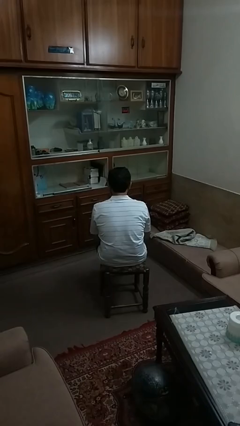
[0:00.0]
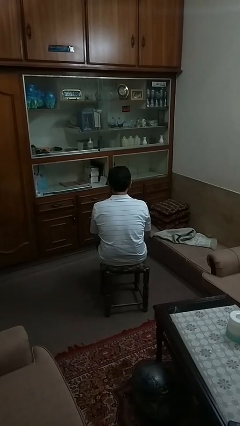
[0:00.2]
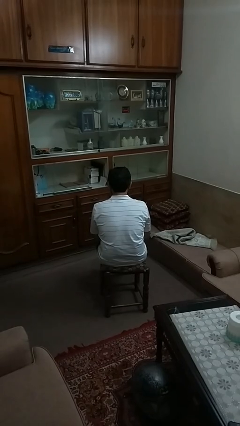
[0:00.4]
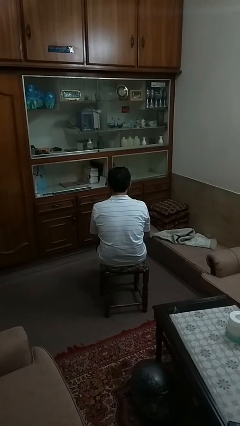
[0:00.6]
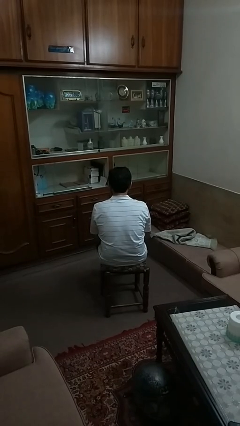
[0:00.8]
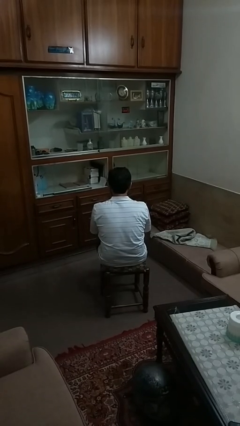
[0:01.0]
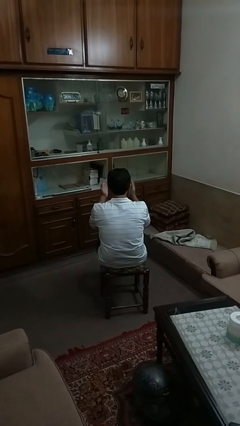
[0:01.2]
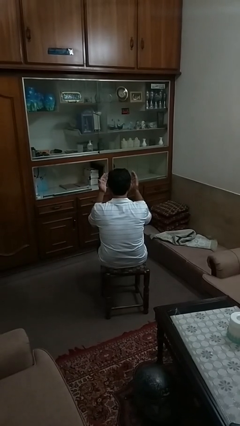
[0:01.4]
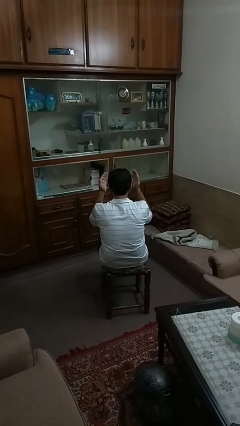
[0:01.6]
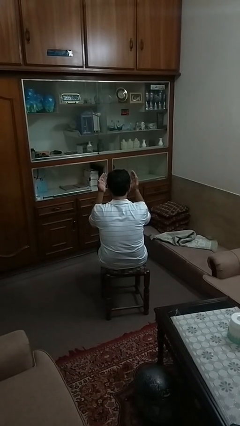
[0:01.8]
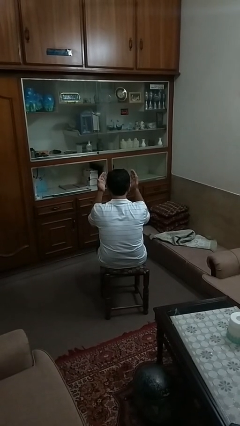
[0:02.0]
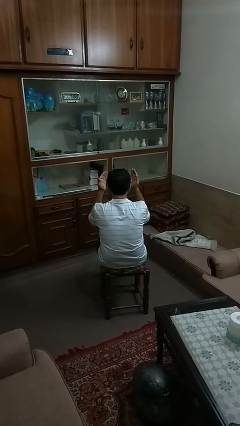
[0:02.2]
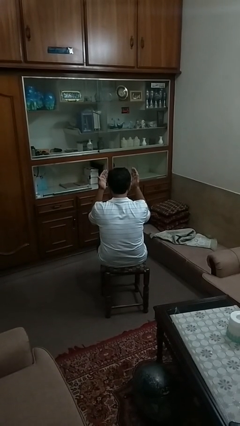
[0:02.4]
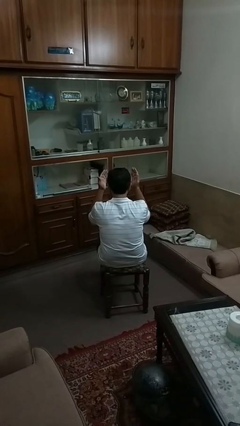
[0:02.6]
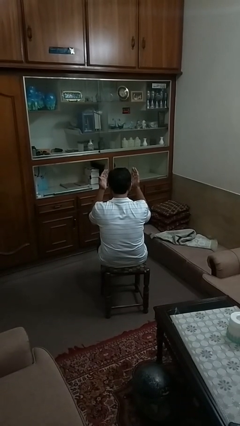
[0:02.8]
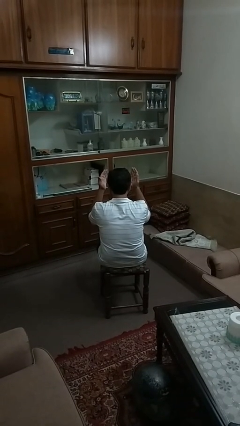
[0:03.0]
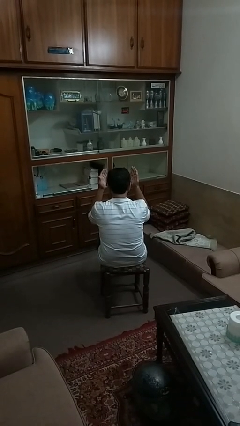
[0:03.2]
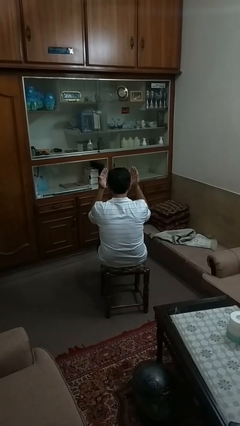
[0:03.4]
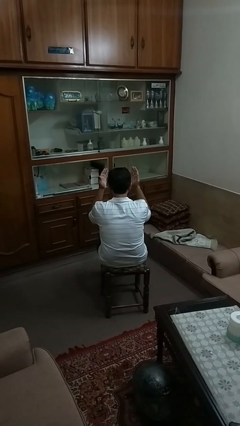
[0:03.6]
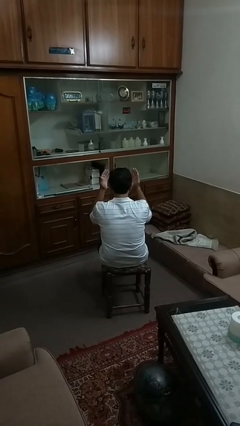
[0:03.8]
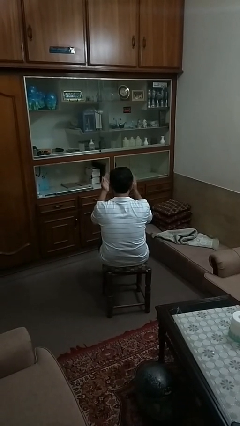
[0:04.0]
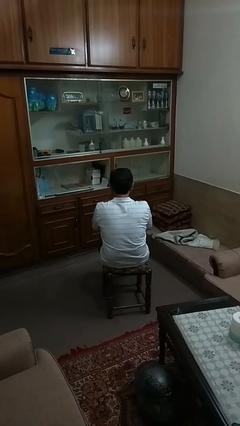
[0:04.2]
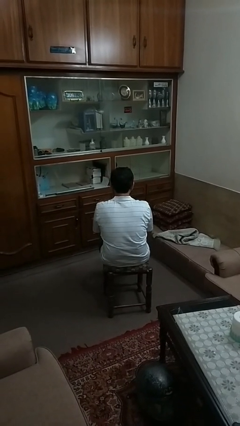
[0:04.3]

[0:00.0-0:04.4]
person prays

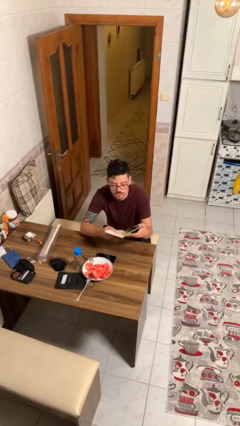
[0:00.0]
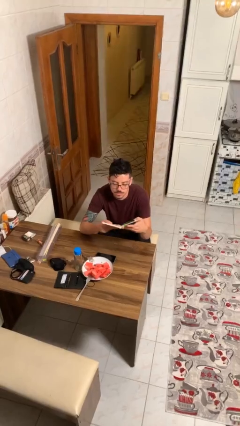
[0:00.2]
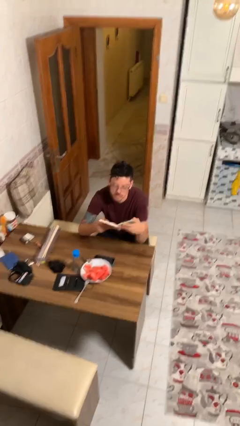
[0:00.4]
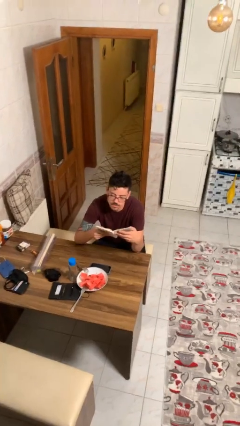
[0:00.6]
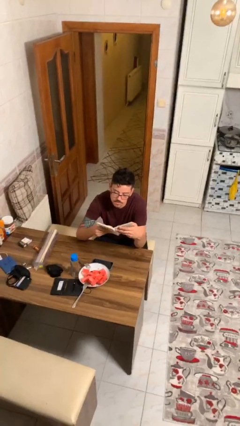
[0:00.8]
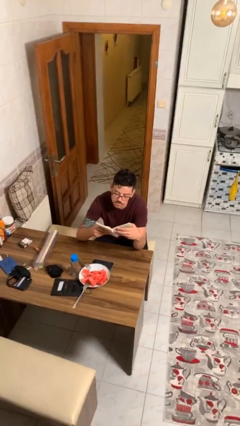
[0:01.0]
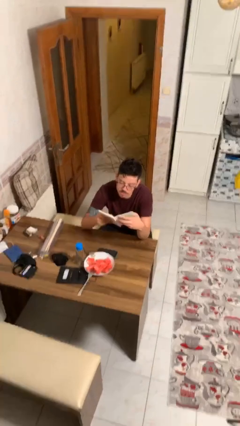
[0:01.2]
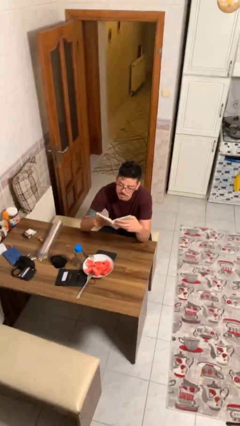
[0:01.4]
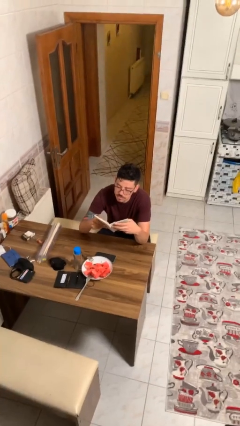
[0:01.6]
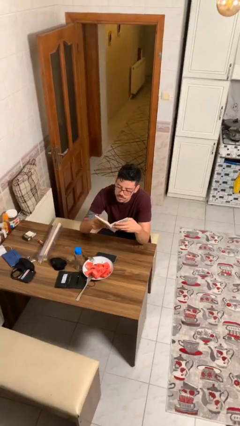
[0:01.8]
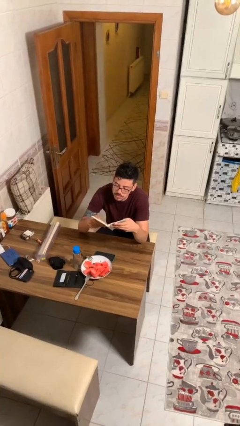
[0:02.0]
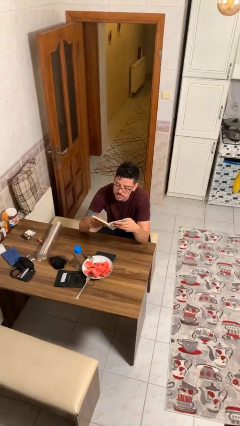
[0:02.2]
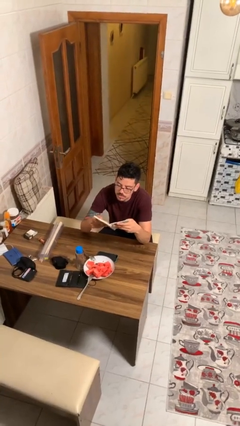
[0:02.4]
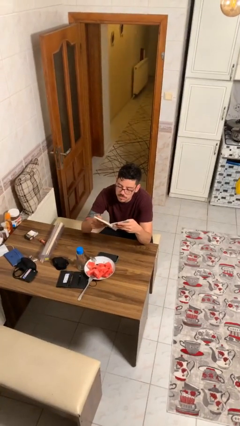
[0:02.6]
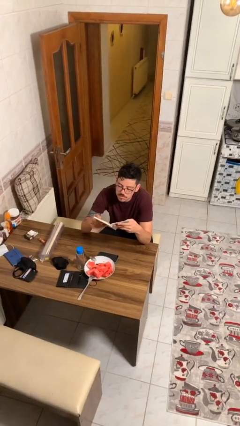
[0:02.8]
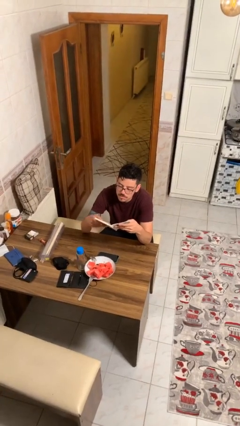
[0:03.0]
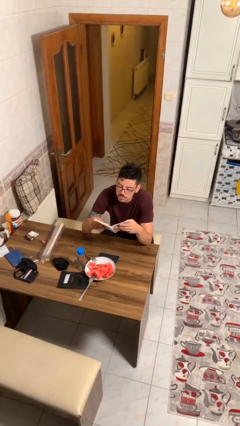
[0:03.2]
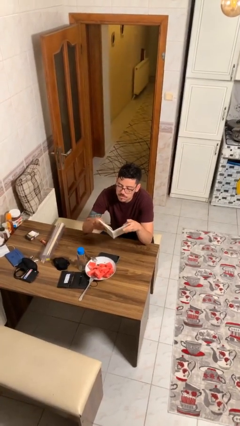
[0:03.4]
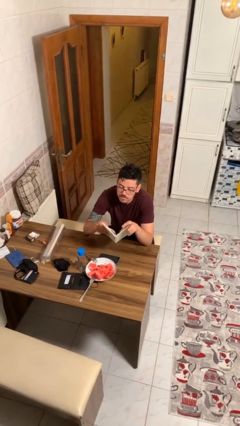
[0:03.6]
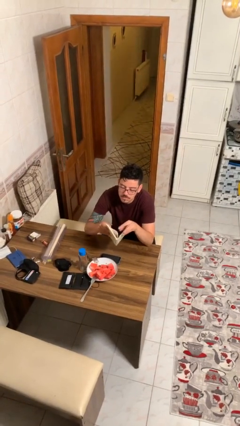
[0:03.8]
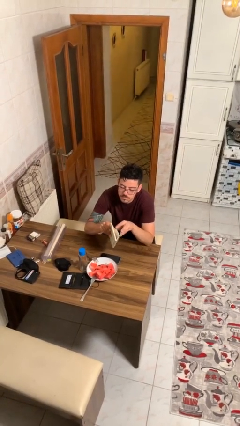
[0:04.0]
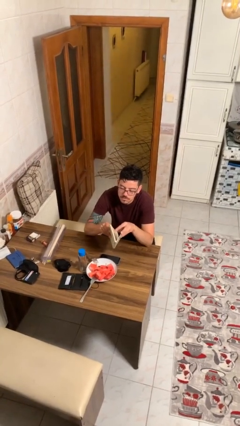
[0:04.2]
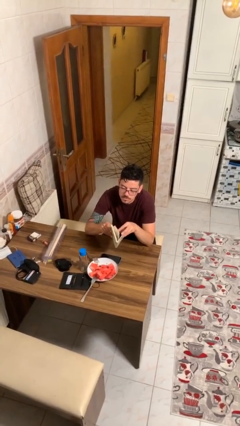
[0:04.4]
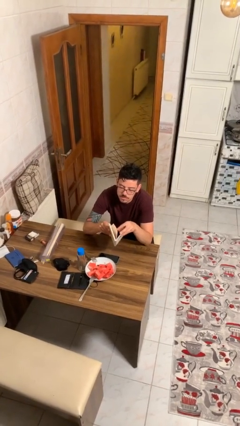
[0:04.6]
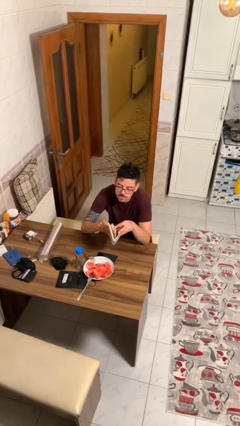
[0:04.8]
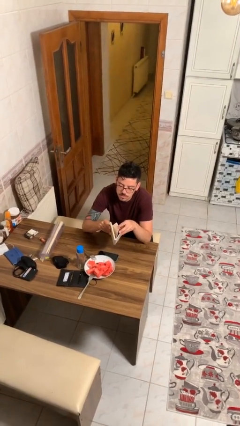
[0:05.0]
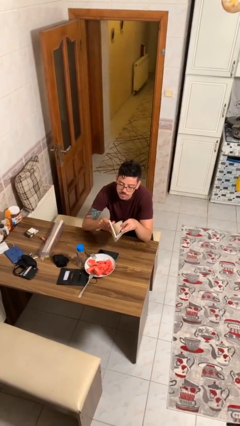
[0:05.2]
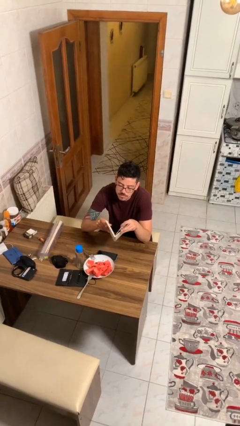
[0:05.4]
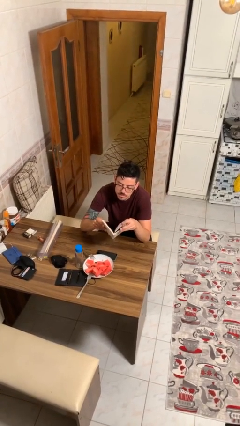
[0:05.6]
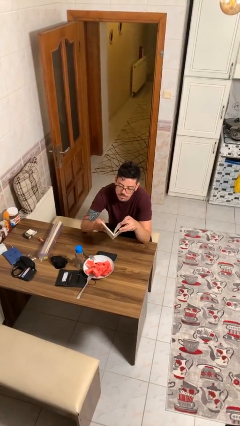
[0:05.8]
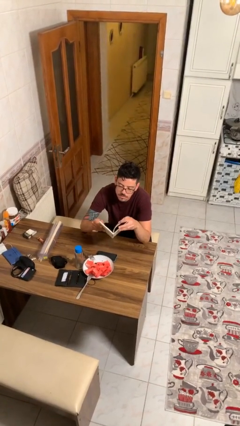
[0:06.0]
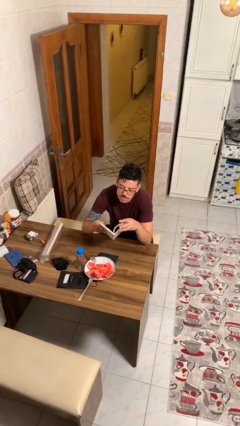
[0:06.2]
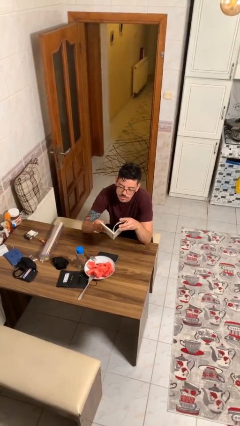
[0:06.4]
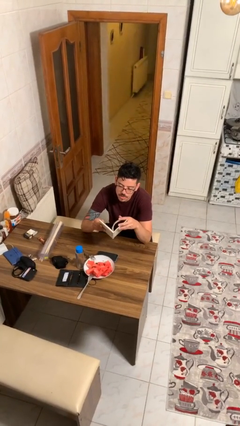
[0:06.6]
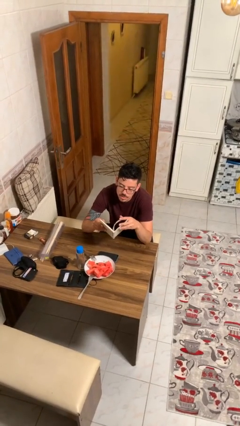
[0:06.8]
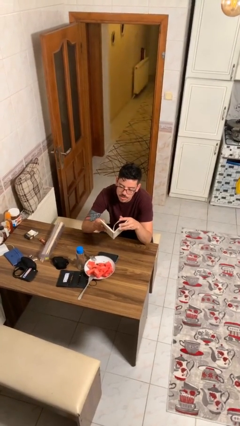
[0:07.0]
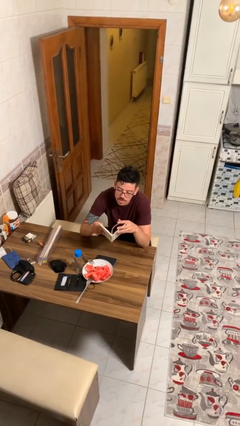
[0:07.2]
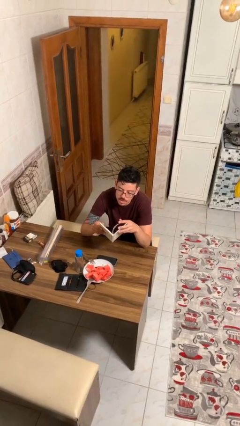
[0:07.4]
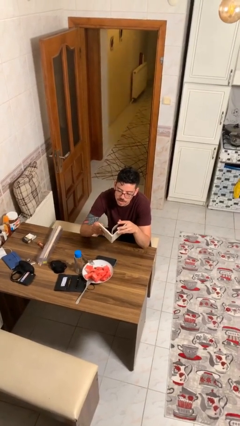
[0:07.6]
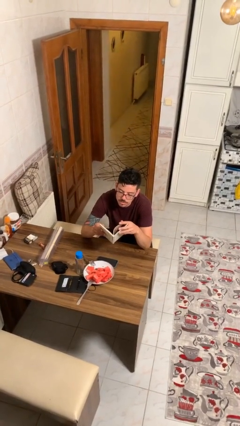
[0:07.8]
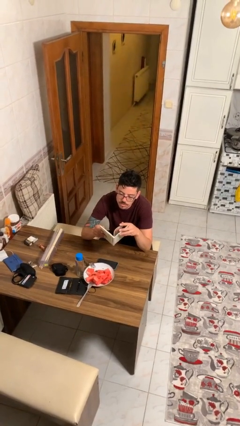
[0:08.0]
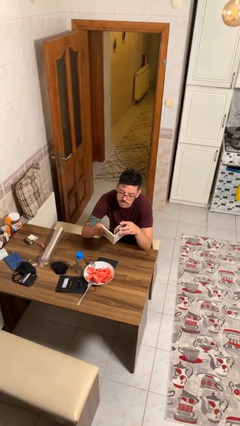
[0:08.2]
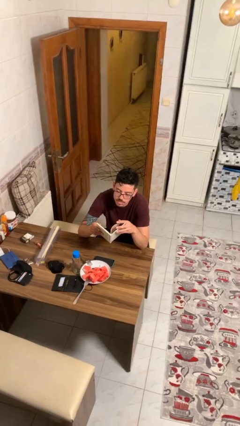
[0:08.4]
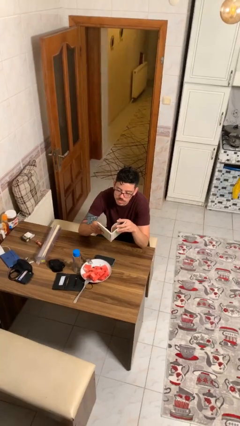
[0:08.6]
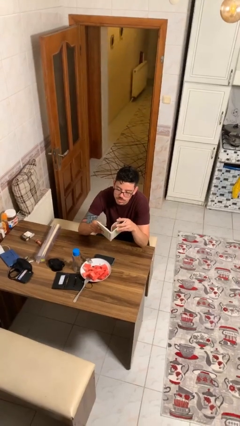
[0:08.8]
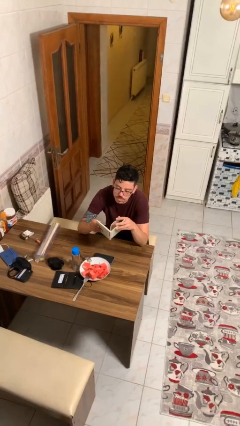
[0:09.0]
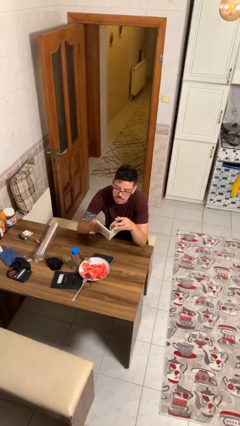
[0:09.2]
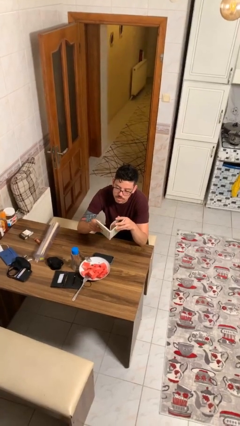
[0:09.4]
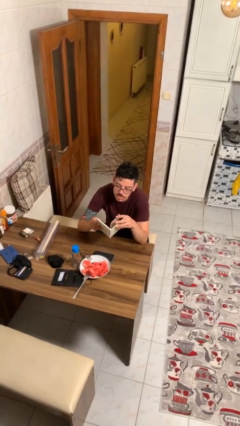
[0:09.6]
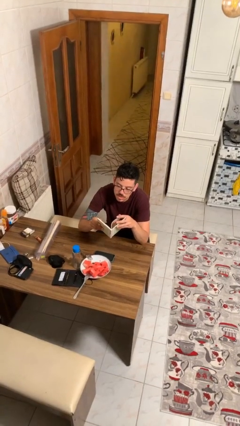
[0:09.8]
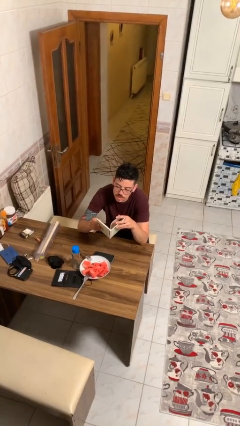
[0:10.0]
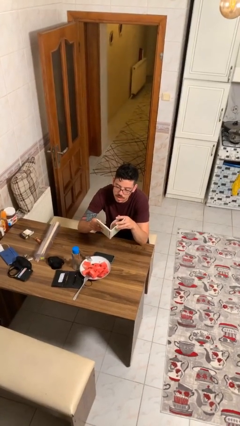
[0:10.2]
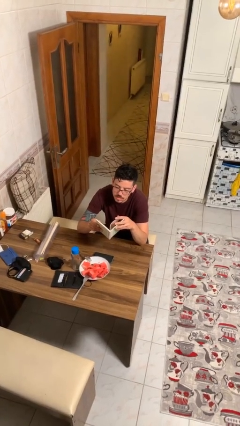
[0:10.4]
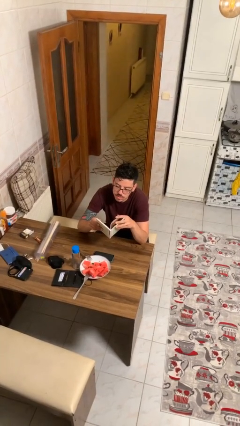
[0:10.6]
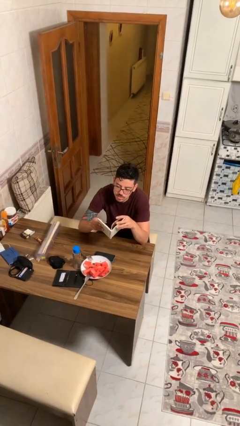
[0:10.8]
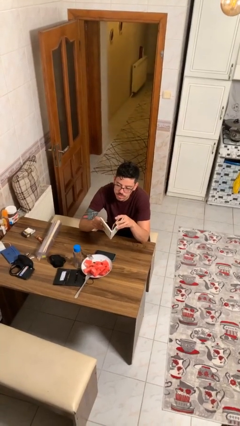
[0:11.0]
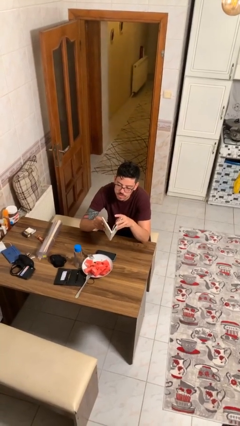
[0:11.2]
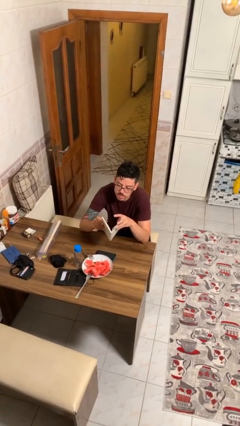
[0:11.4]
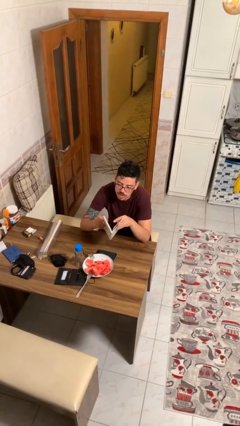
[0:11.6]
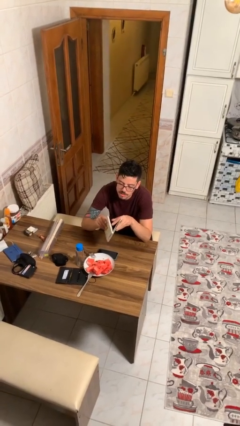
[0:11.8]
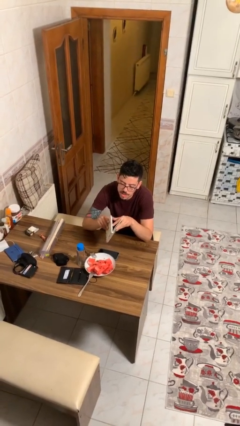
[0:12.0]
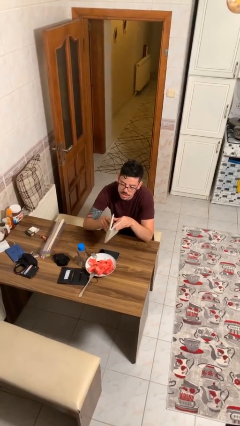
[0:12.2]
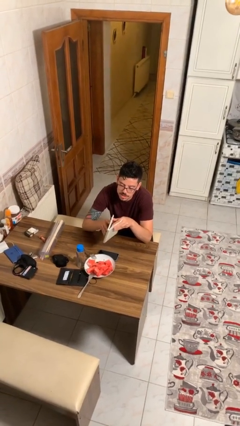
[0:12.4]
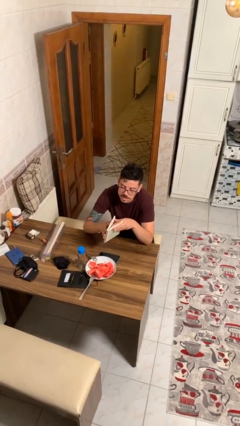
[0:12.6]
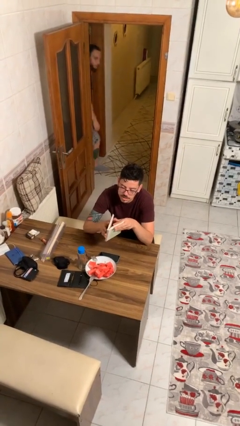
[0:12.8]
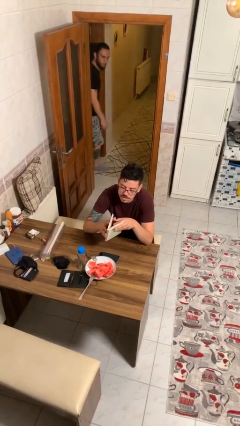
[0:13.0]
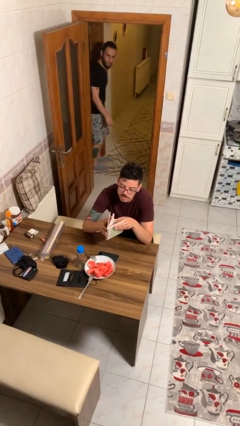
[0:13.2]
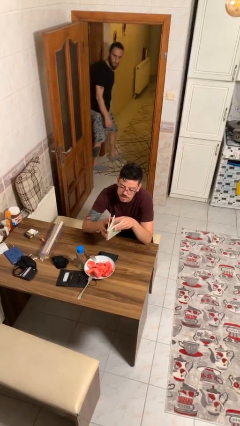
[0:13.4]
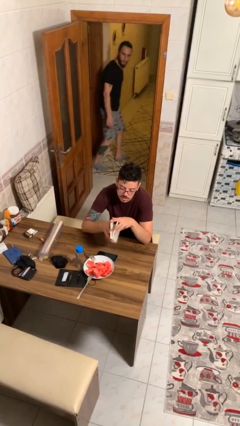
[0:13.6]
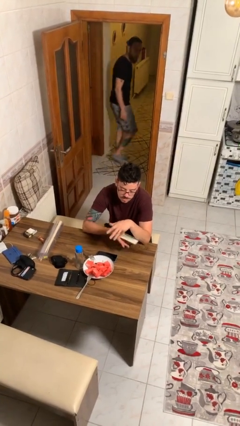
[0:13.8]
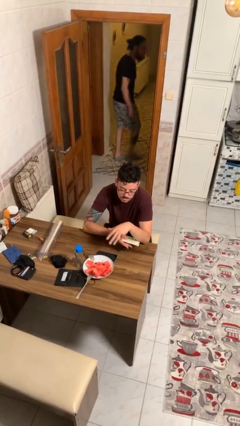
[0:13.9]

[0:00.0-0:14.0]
person reads document
